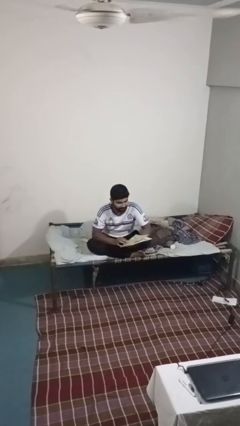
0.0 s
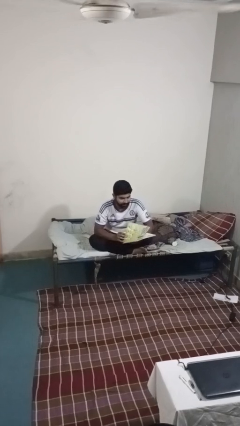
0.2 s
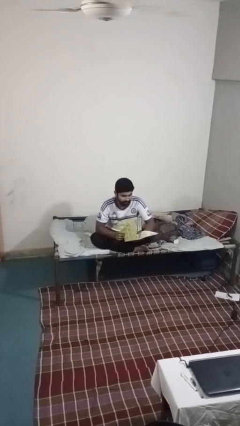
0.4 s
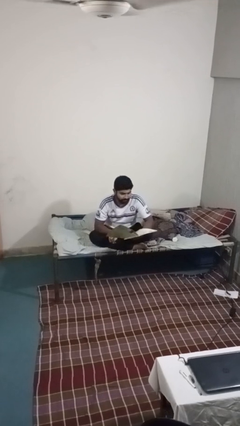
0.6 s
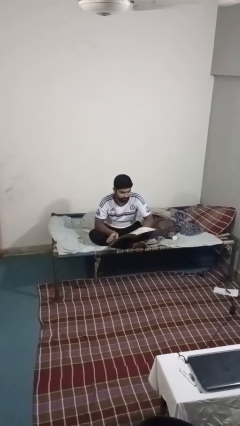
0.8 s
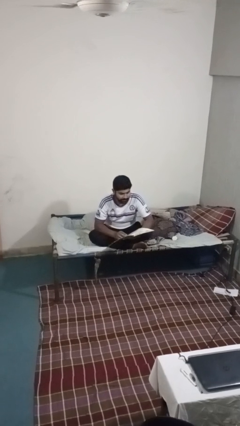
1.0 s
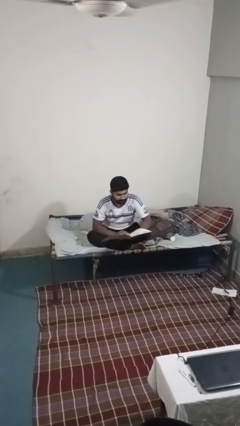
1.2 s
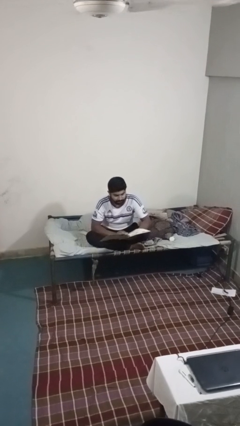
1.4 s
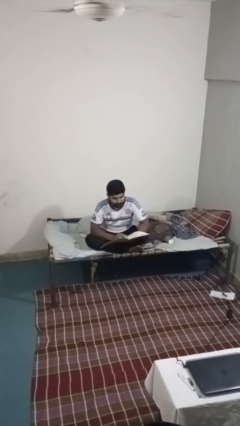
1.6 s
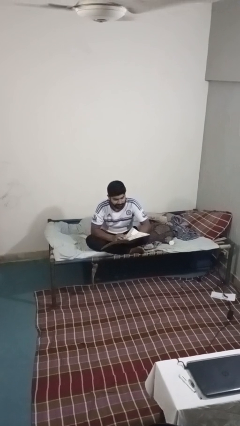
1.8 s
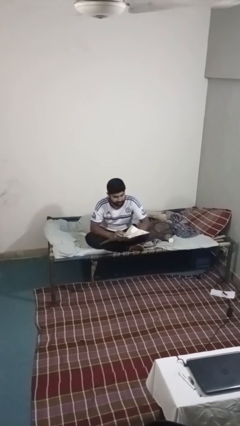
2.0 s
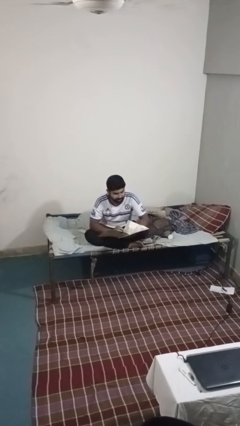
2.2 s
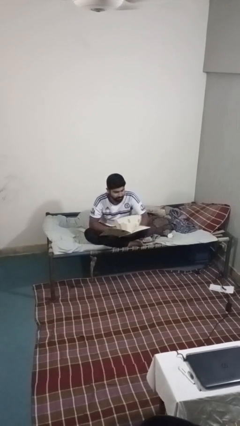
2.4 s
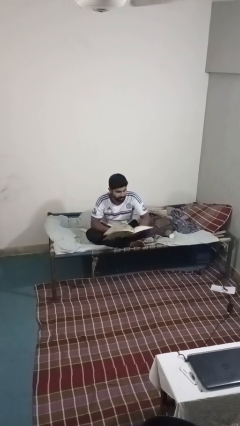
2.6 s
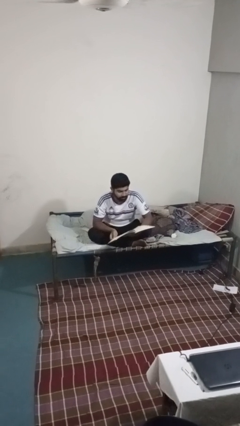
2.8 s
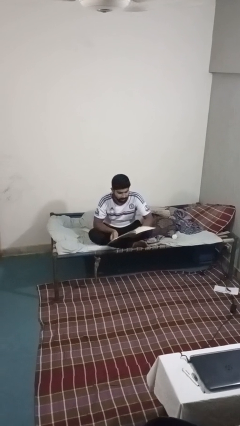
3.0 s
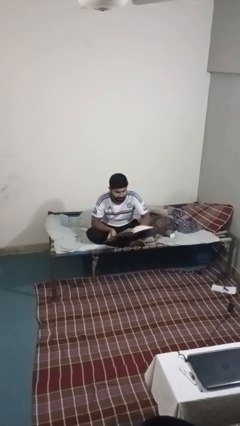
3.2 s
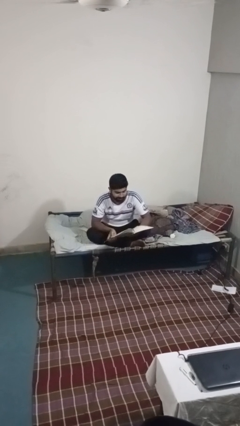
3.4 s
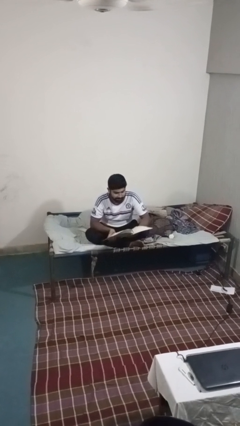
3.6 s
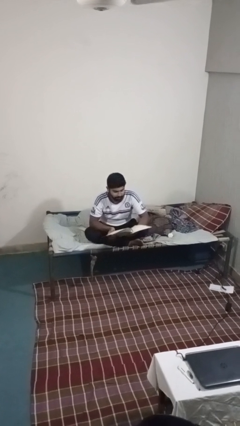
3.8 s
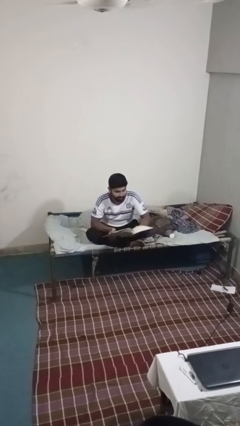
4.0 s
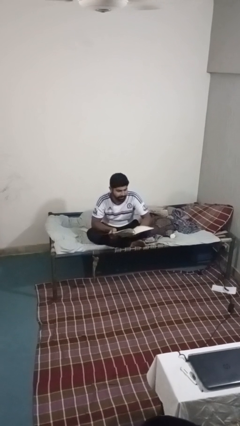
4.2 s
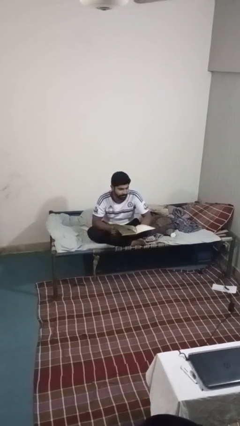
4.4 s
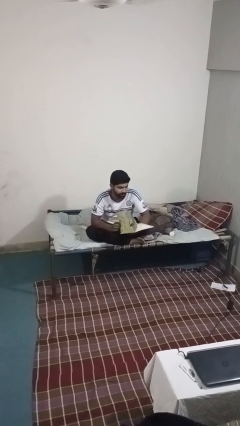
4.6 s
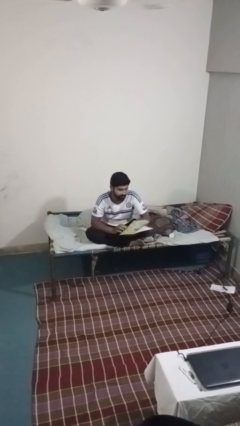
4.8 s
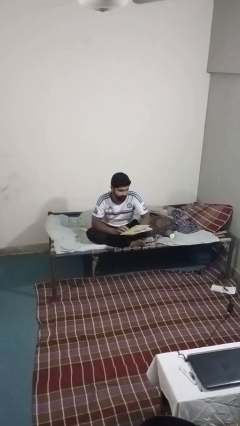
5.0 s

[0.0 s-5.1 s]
person reads magazine

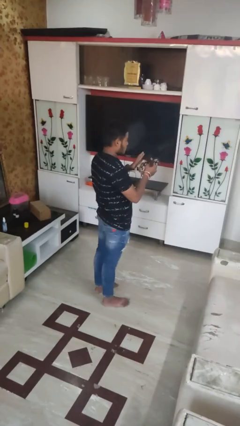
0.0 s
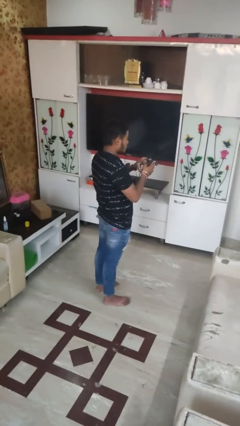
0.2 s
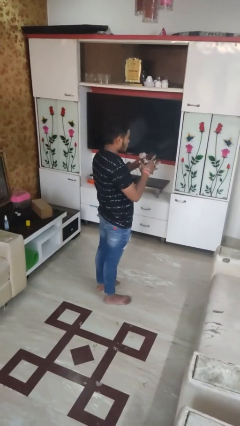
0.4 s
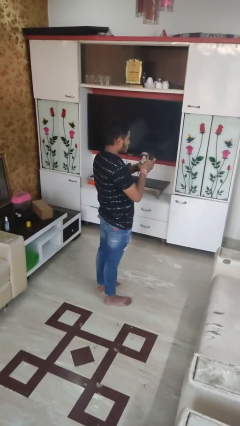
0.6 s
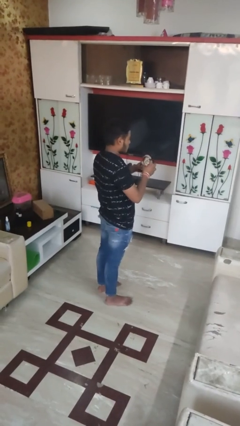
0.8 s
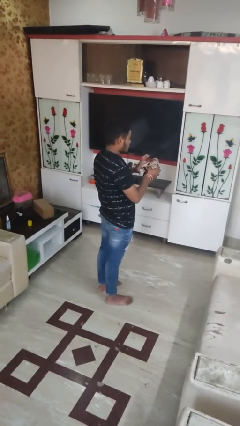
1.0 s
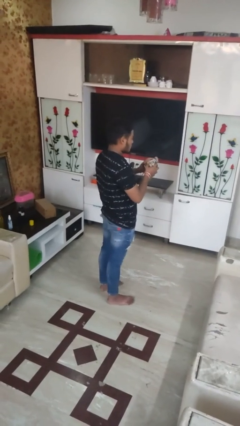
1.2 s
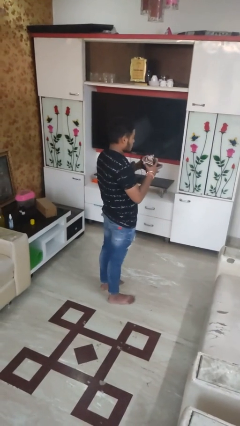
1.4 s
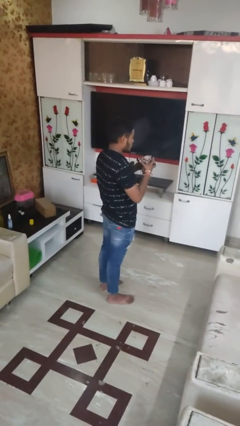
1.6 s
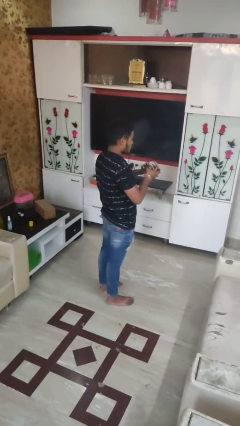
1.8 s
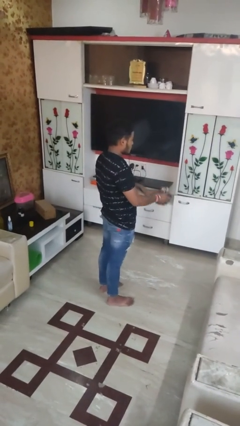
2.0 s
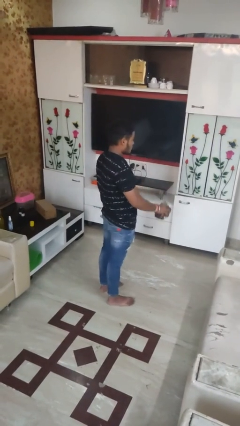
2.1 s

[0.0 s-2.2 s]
person squeezes object

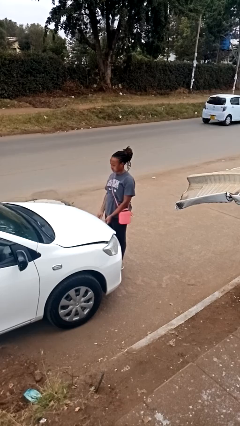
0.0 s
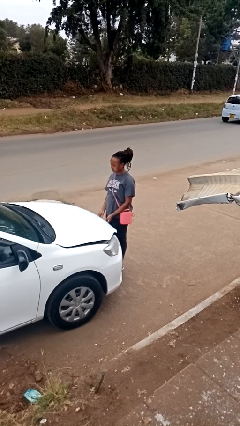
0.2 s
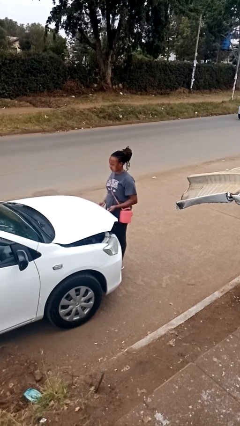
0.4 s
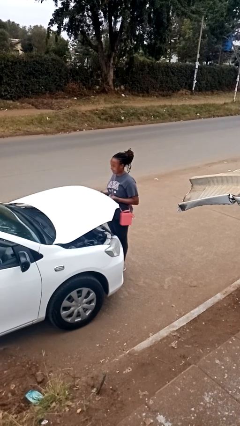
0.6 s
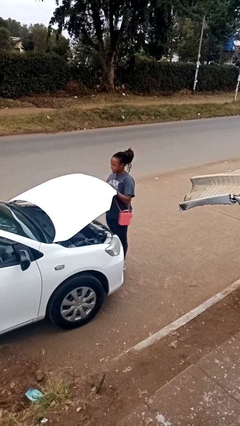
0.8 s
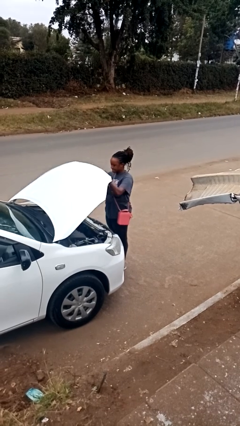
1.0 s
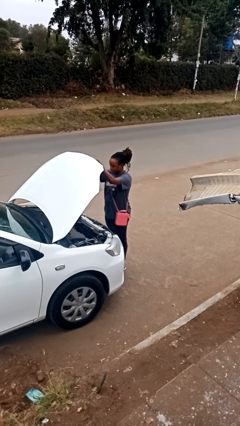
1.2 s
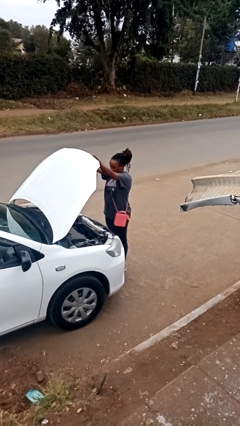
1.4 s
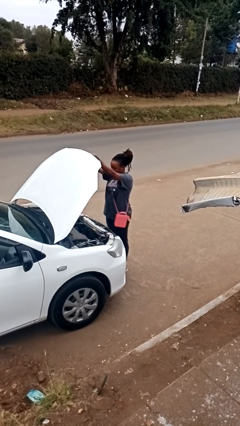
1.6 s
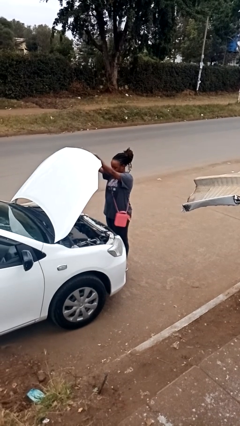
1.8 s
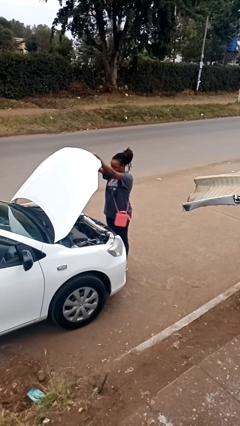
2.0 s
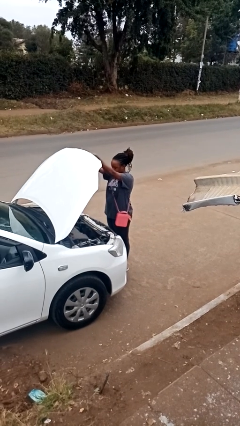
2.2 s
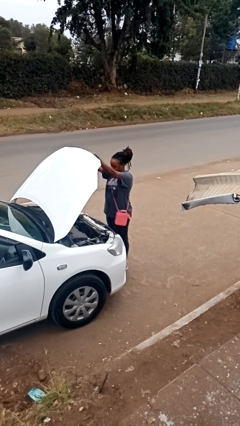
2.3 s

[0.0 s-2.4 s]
person opens car hood

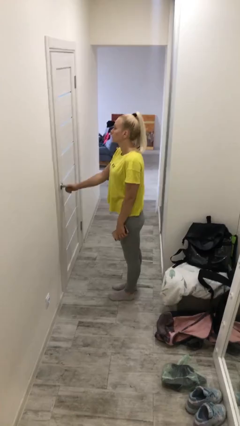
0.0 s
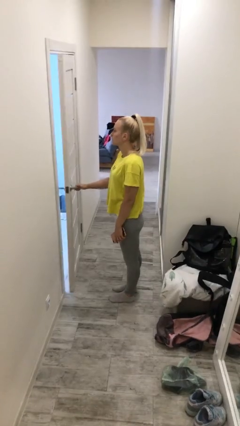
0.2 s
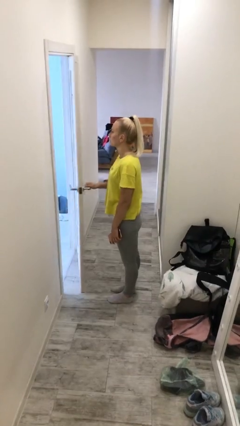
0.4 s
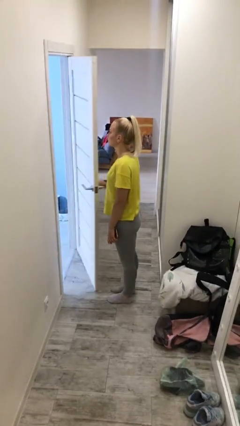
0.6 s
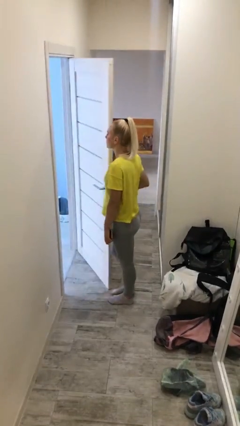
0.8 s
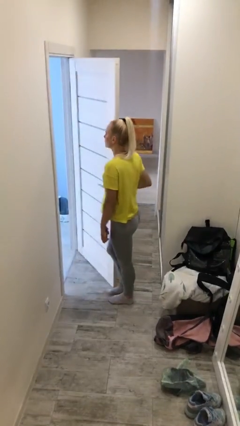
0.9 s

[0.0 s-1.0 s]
person opens facility door

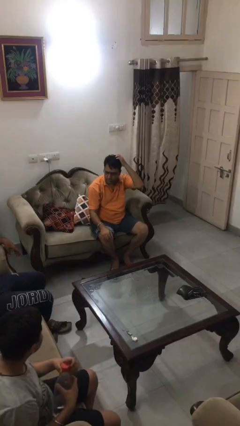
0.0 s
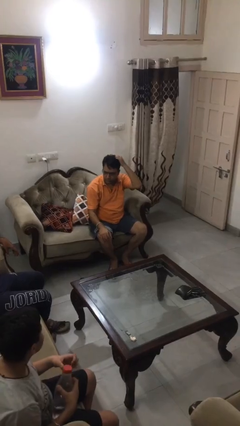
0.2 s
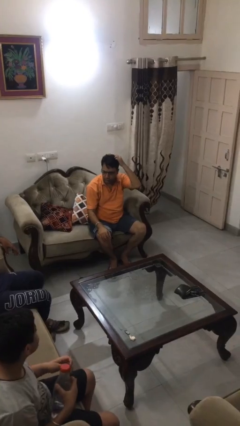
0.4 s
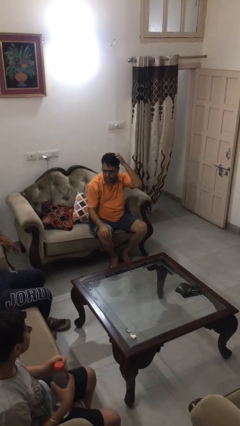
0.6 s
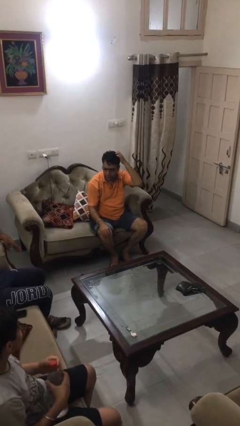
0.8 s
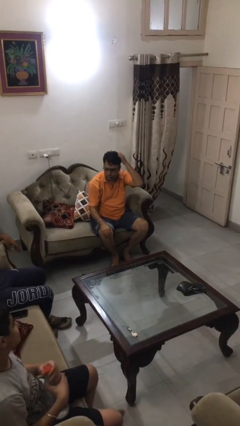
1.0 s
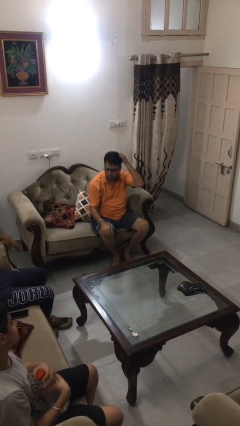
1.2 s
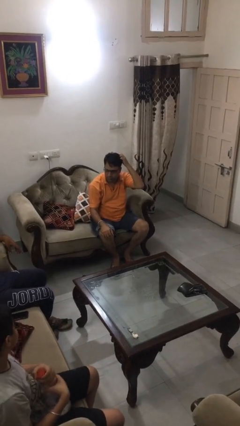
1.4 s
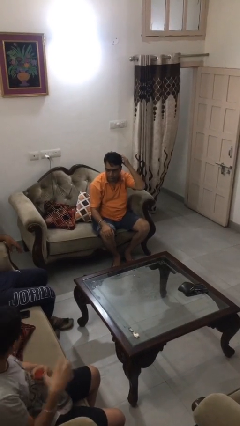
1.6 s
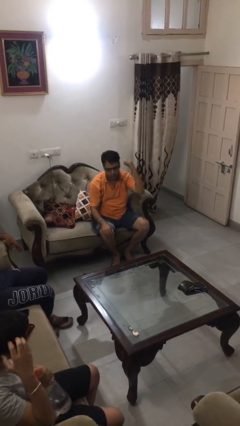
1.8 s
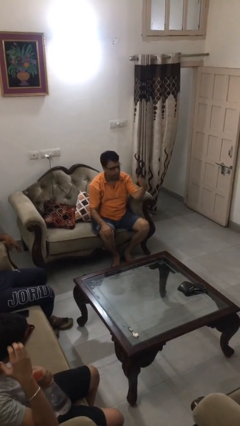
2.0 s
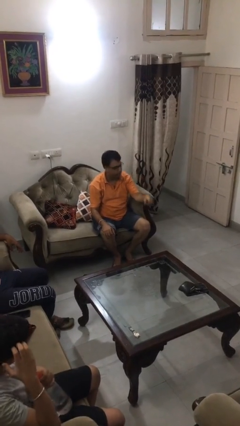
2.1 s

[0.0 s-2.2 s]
person scratches face

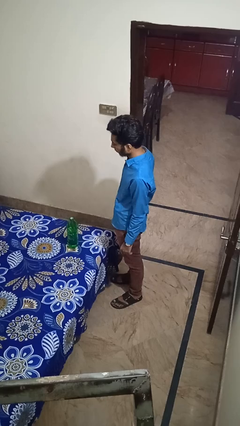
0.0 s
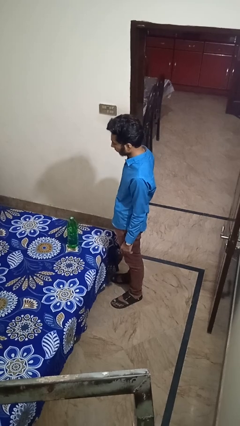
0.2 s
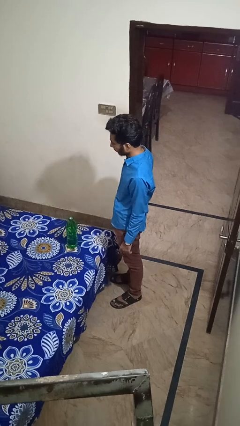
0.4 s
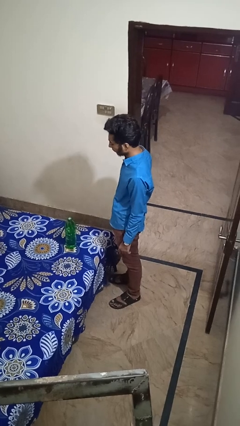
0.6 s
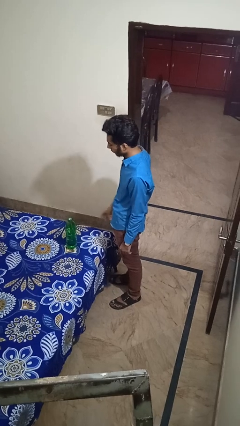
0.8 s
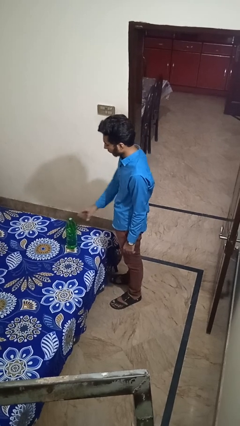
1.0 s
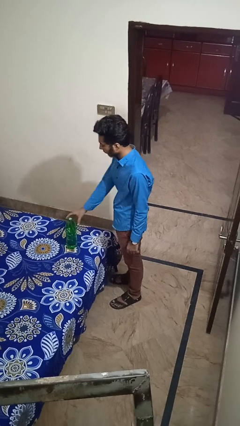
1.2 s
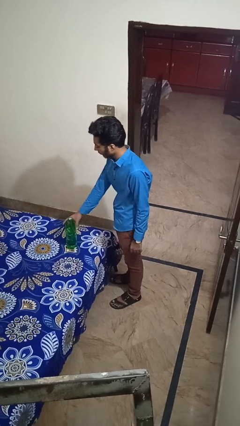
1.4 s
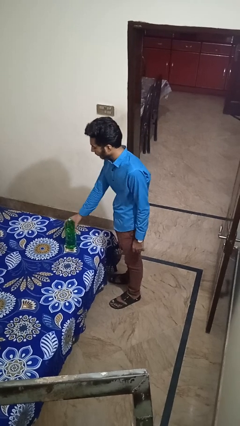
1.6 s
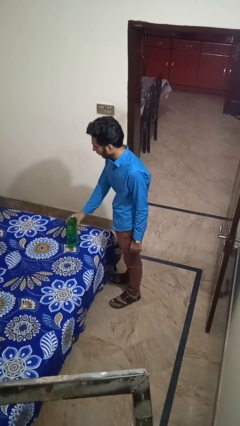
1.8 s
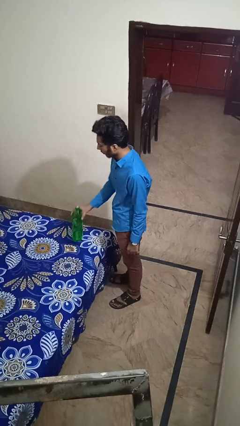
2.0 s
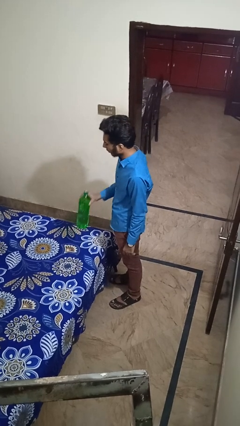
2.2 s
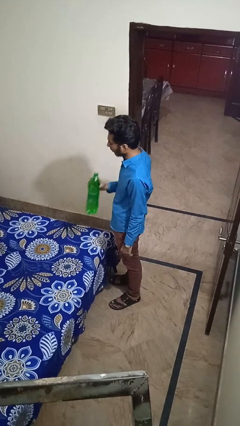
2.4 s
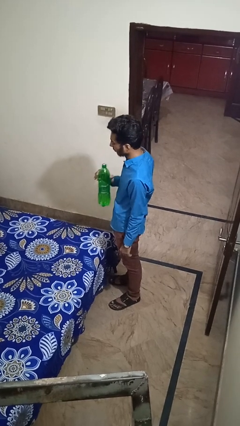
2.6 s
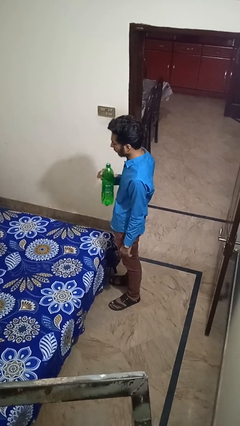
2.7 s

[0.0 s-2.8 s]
person picks up object from bed

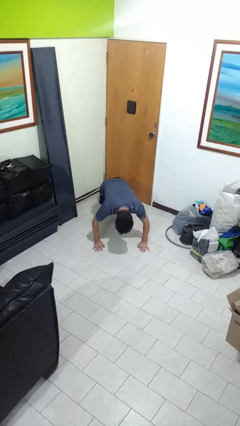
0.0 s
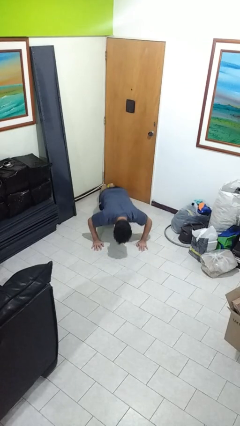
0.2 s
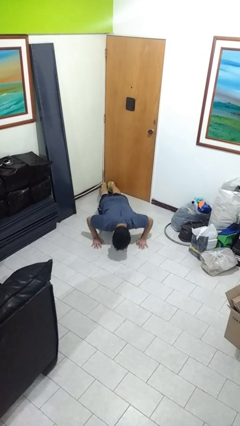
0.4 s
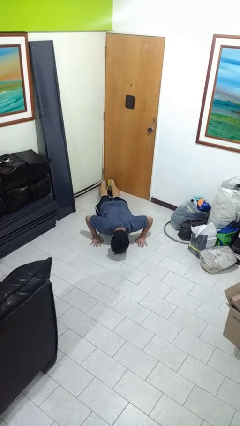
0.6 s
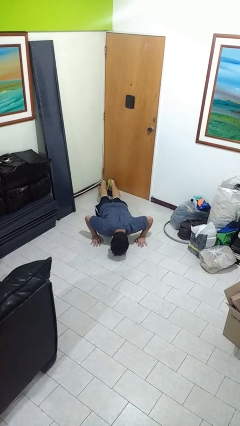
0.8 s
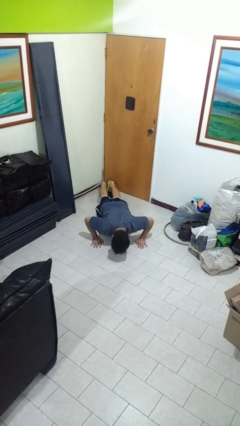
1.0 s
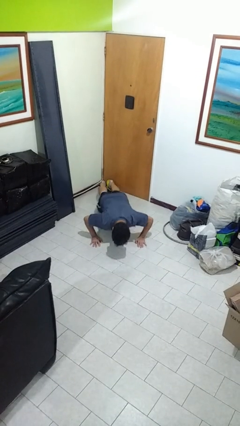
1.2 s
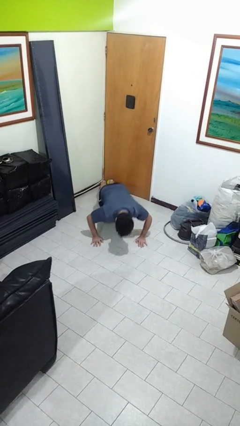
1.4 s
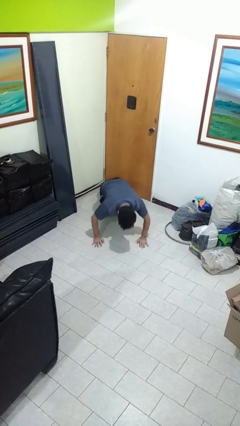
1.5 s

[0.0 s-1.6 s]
person exercises with pushup
